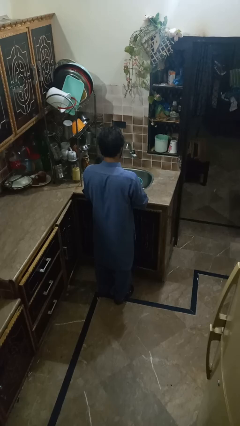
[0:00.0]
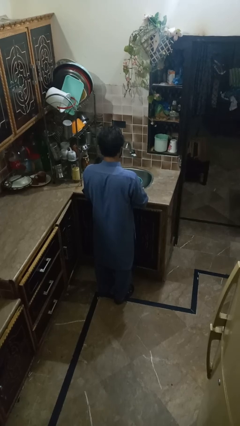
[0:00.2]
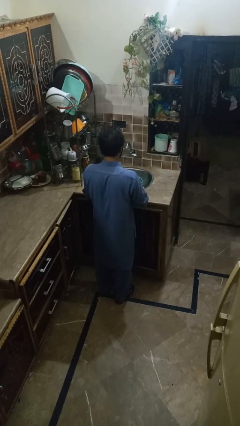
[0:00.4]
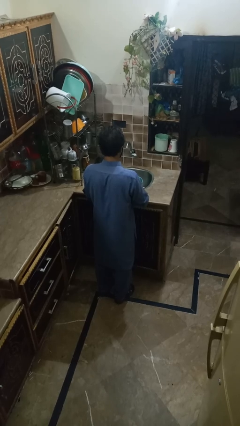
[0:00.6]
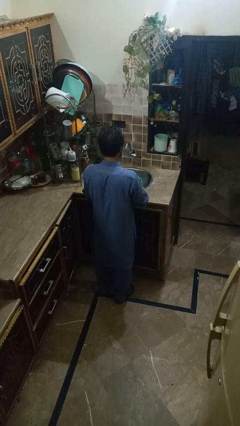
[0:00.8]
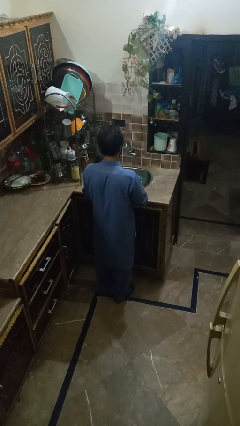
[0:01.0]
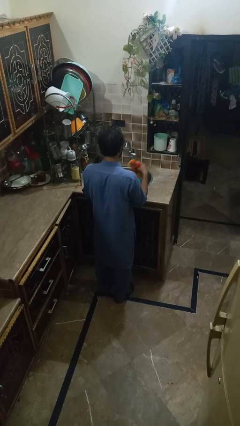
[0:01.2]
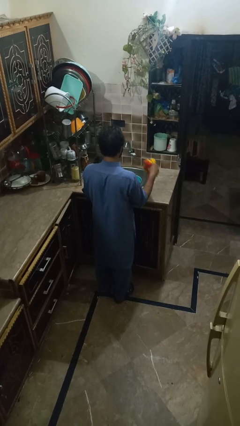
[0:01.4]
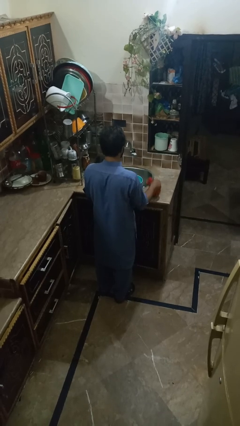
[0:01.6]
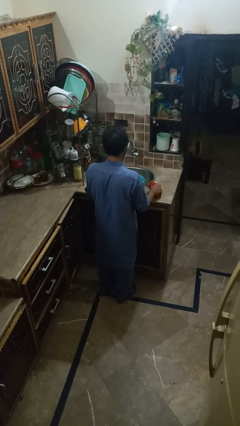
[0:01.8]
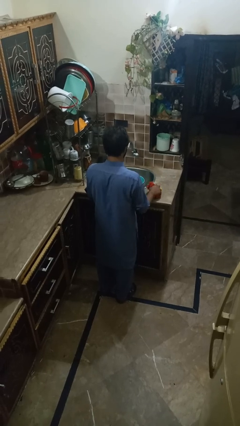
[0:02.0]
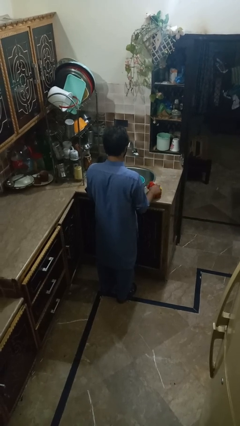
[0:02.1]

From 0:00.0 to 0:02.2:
person pours into bowl

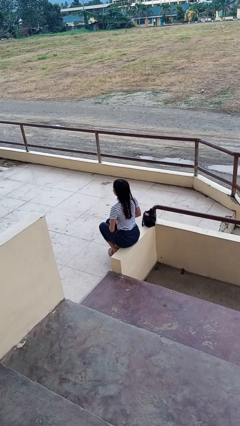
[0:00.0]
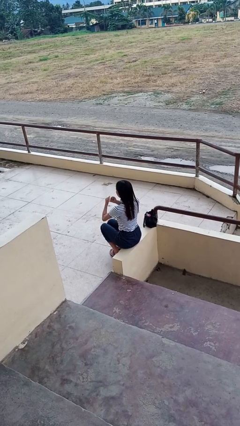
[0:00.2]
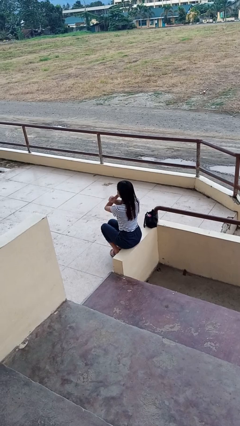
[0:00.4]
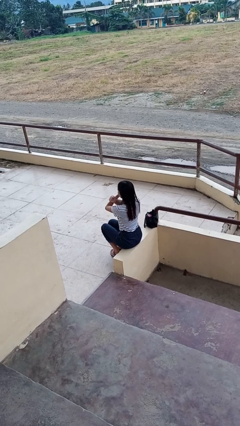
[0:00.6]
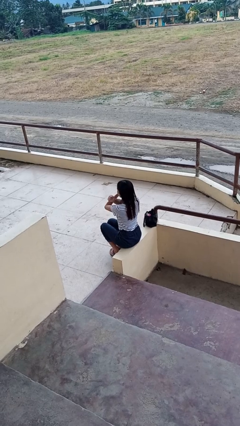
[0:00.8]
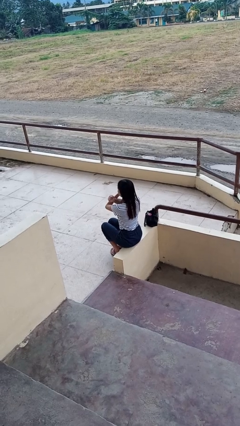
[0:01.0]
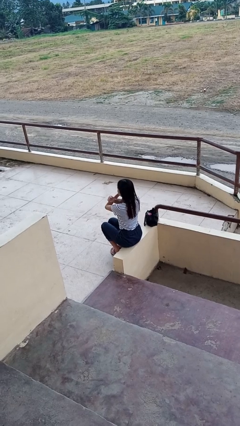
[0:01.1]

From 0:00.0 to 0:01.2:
person gestures arms x

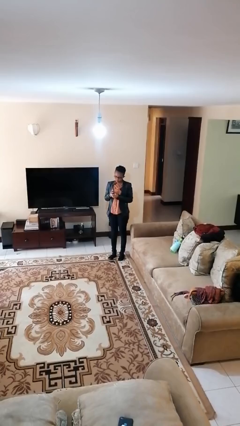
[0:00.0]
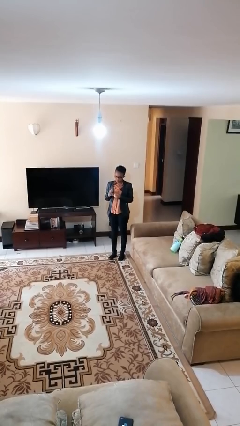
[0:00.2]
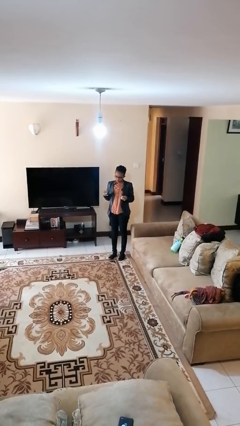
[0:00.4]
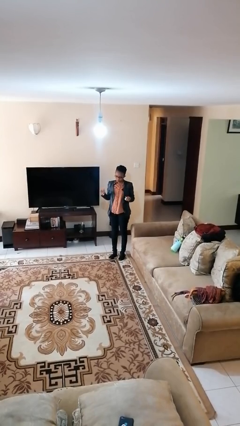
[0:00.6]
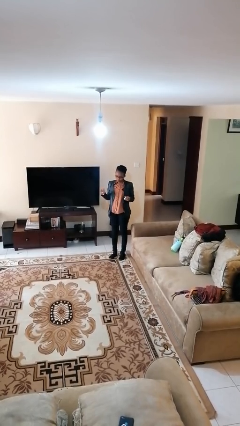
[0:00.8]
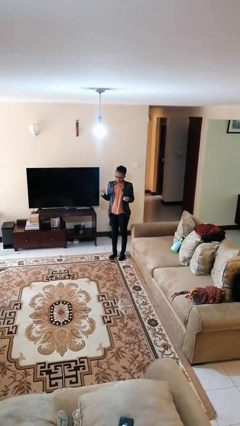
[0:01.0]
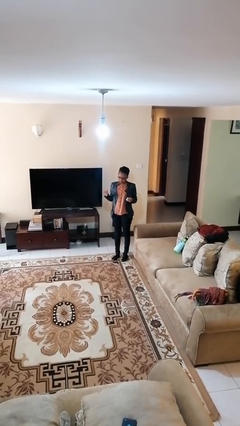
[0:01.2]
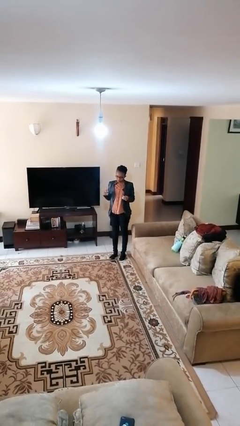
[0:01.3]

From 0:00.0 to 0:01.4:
person takes off ring

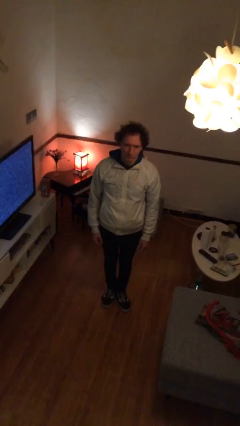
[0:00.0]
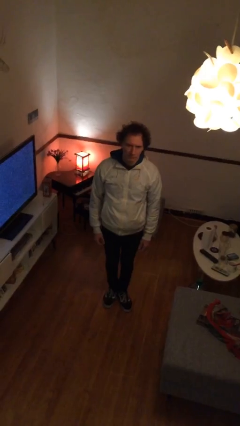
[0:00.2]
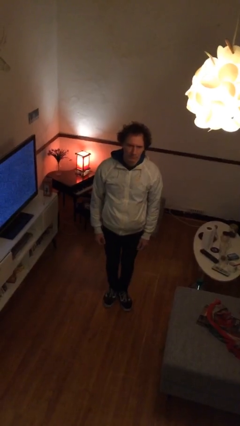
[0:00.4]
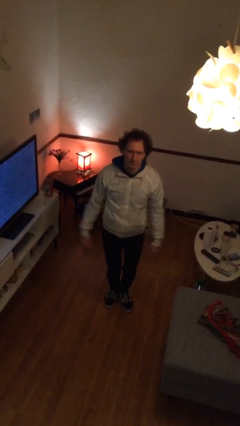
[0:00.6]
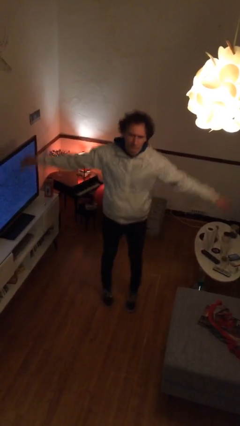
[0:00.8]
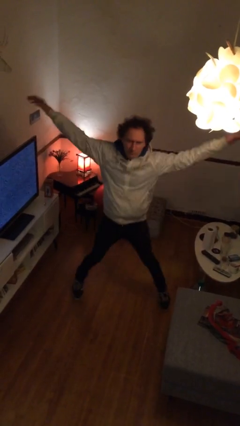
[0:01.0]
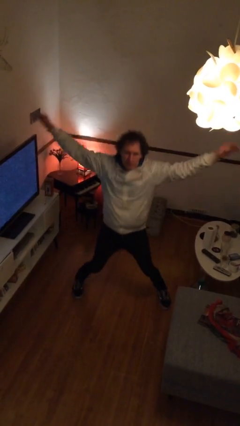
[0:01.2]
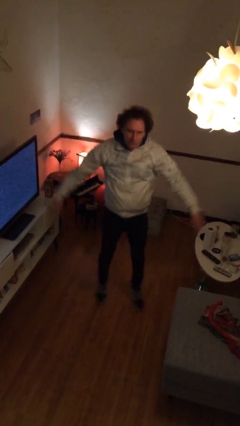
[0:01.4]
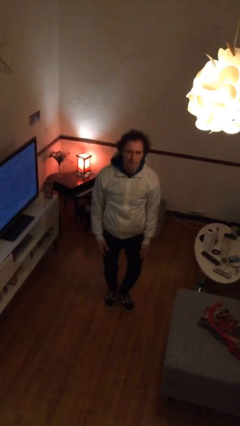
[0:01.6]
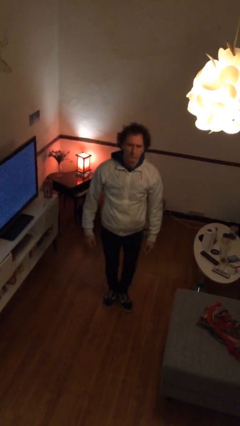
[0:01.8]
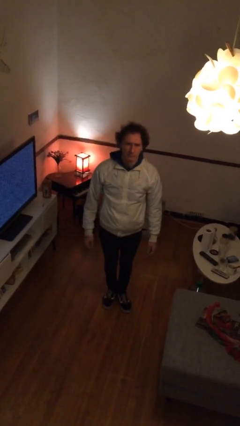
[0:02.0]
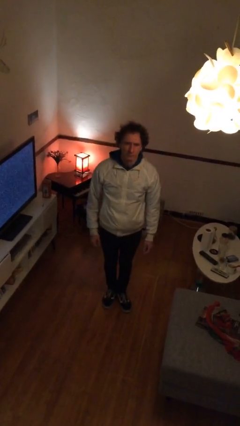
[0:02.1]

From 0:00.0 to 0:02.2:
person exercises with jumping jacks

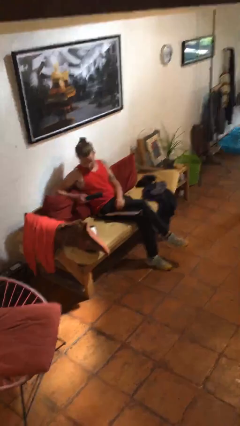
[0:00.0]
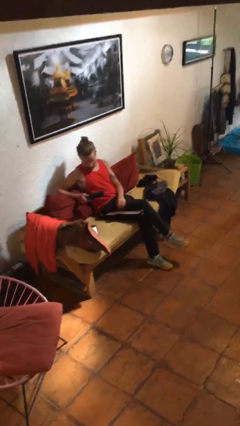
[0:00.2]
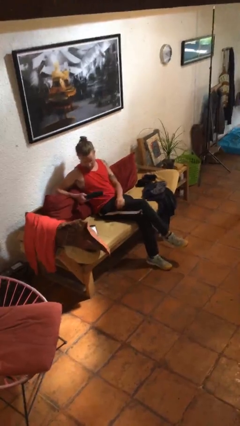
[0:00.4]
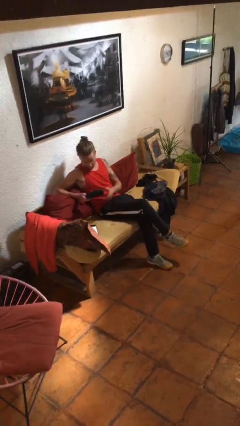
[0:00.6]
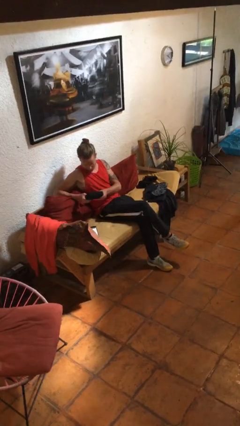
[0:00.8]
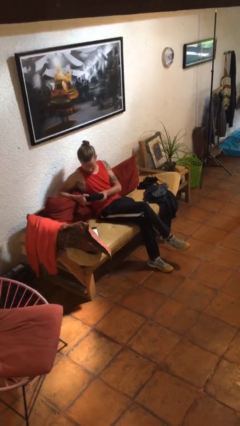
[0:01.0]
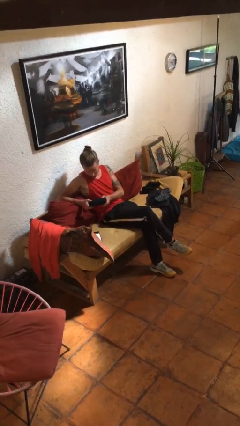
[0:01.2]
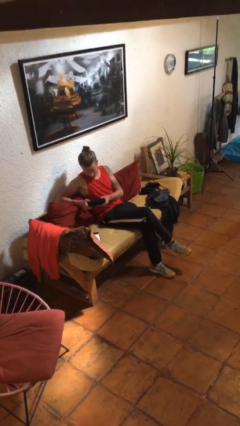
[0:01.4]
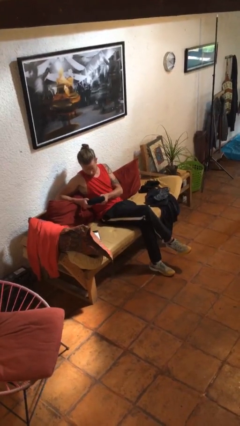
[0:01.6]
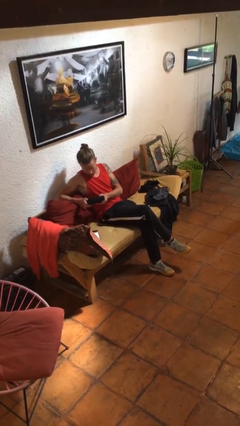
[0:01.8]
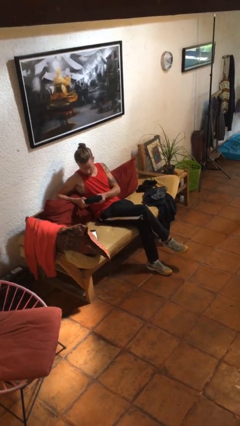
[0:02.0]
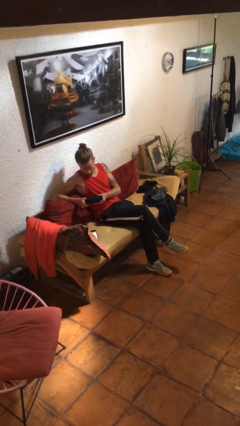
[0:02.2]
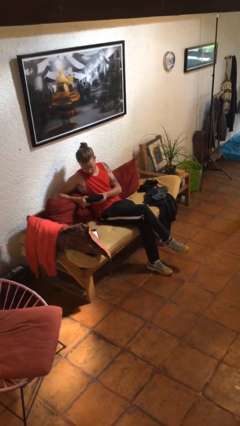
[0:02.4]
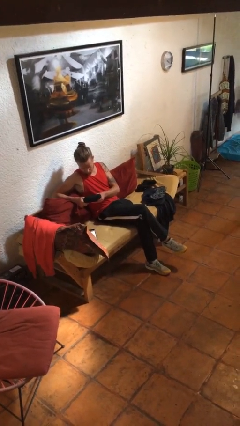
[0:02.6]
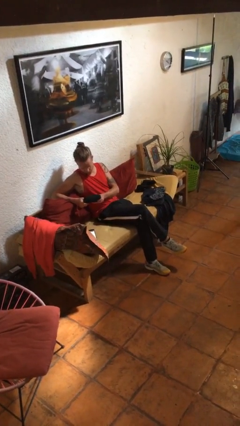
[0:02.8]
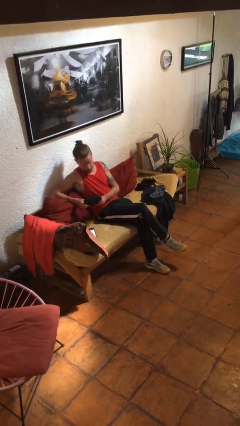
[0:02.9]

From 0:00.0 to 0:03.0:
person interacts with handheld game

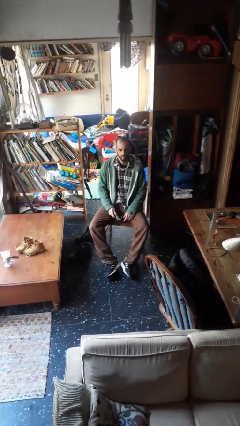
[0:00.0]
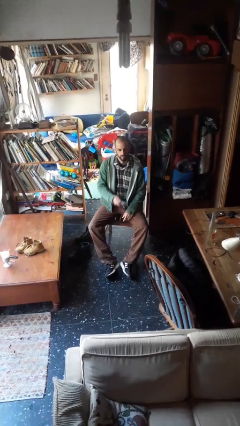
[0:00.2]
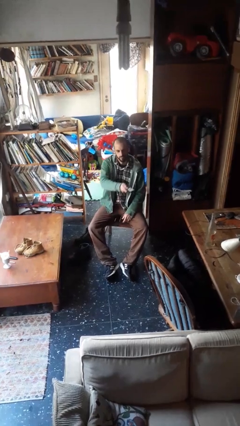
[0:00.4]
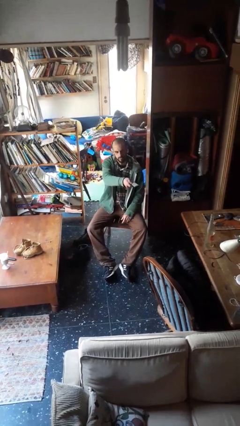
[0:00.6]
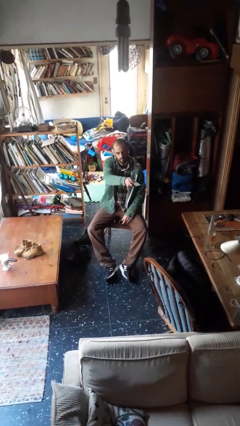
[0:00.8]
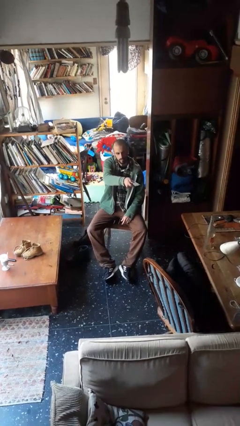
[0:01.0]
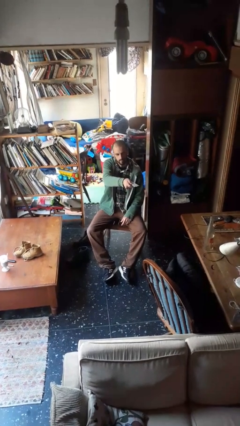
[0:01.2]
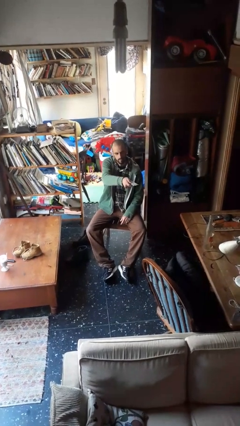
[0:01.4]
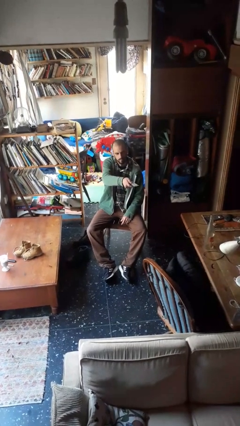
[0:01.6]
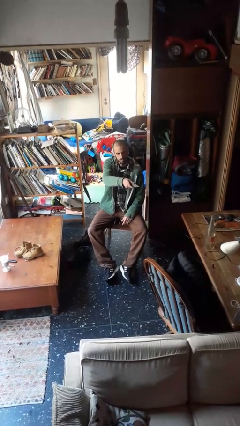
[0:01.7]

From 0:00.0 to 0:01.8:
person uses television remote

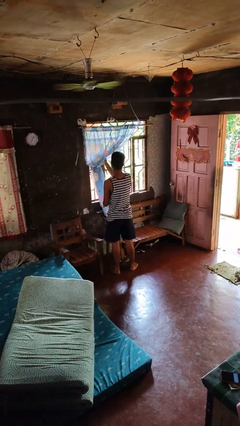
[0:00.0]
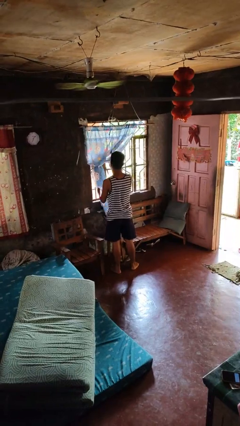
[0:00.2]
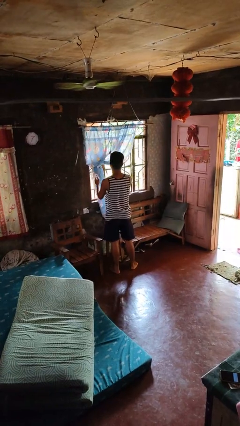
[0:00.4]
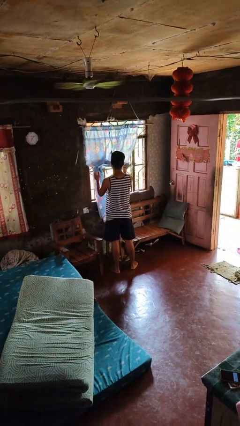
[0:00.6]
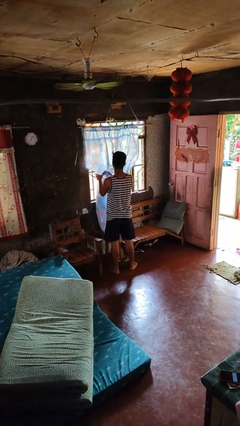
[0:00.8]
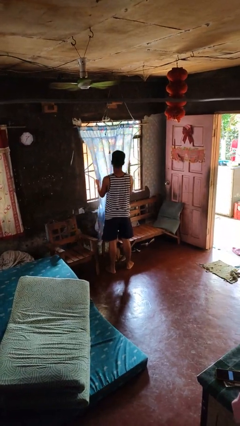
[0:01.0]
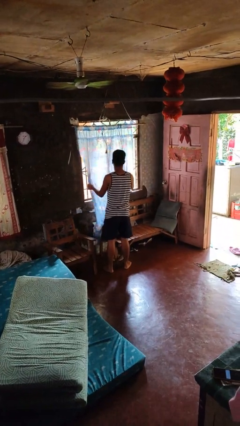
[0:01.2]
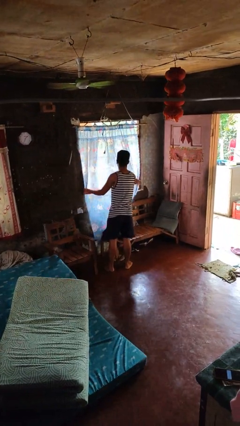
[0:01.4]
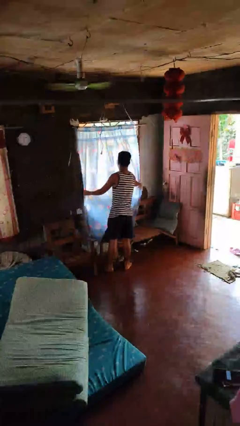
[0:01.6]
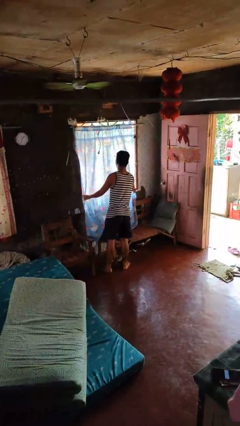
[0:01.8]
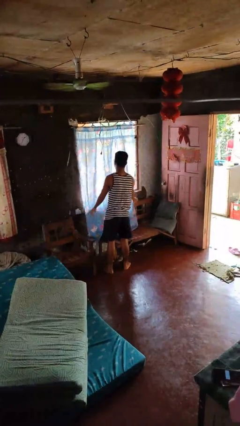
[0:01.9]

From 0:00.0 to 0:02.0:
person closes curtains

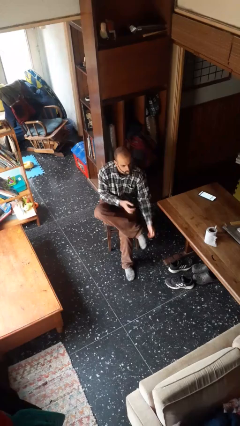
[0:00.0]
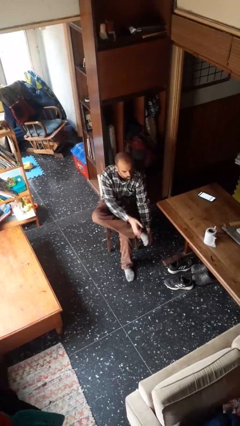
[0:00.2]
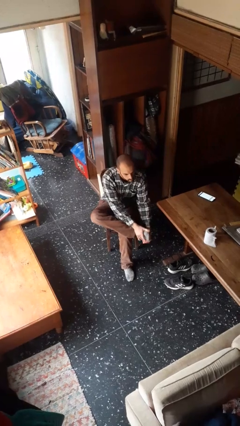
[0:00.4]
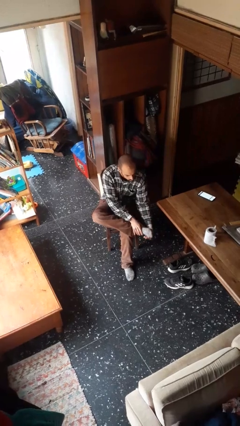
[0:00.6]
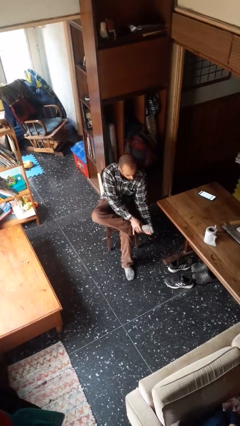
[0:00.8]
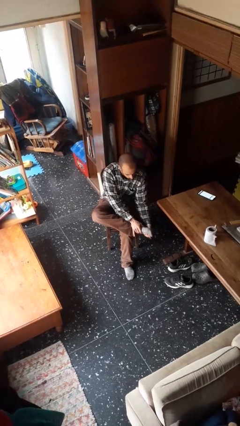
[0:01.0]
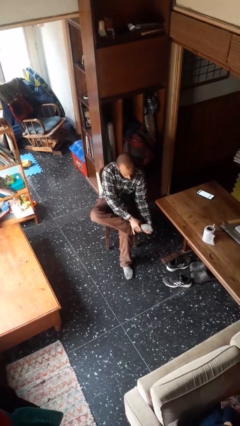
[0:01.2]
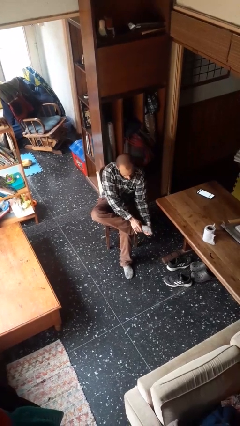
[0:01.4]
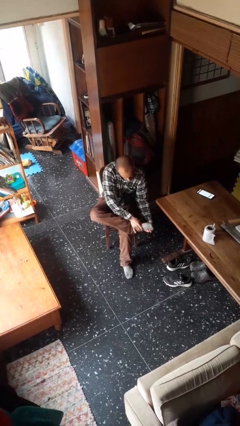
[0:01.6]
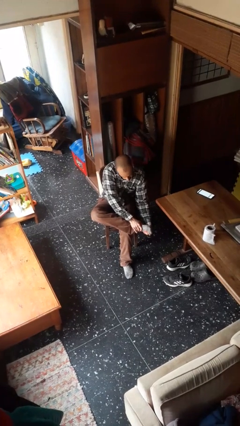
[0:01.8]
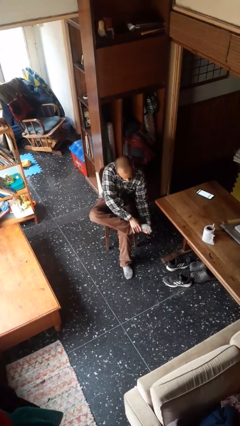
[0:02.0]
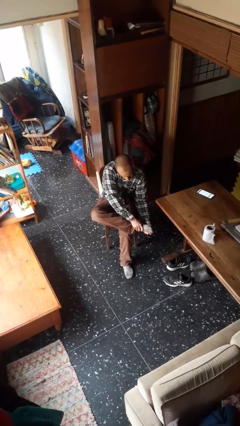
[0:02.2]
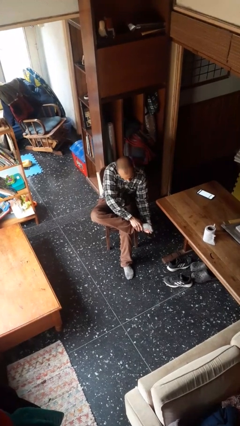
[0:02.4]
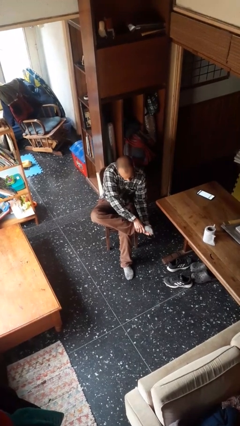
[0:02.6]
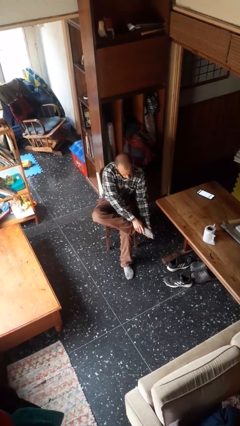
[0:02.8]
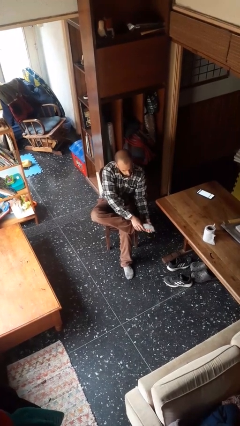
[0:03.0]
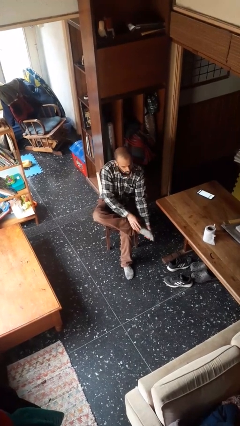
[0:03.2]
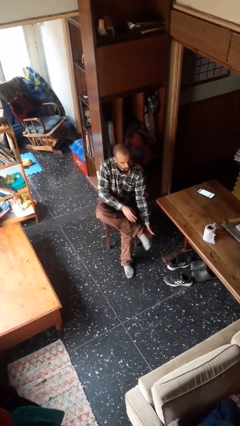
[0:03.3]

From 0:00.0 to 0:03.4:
person rubs foot
